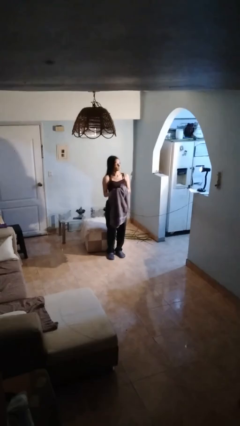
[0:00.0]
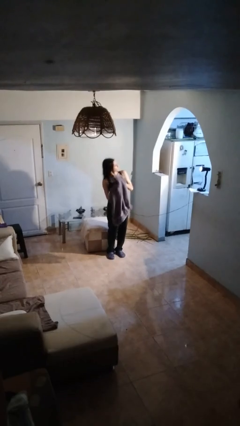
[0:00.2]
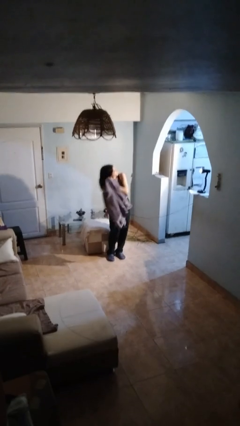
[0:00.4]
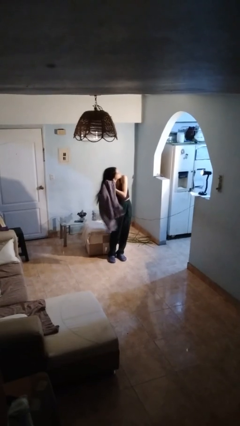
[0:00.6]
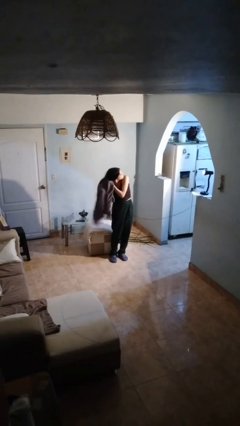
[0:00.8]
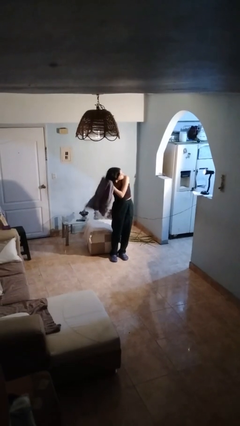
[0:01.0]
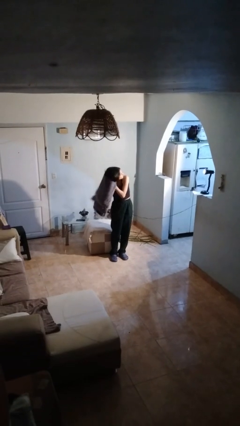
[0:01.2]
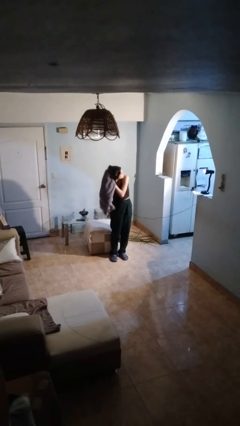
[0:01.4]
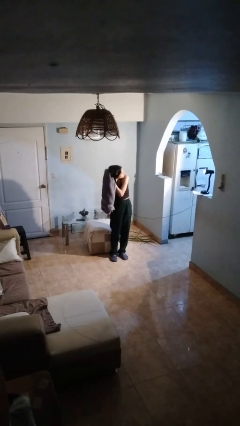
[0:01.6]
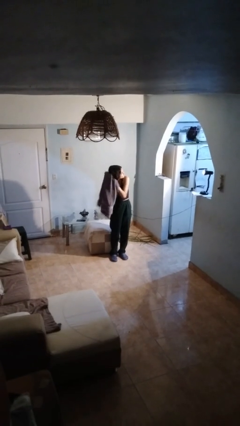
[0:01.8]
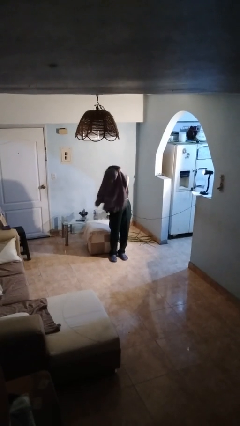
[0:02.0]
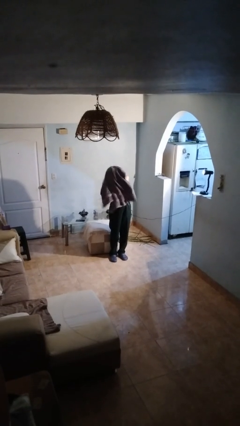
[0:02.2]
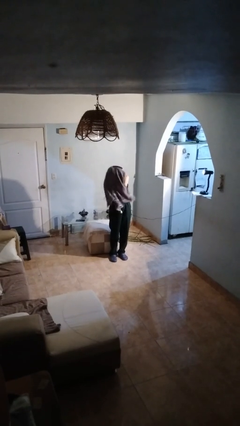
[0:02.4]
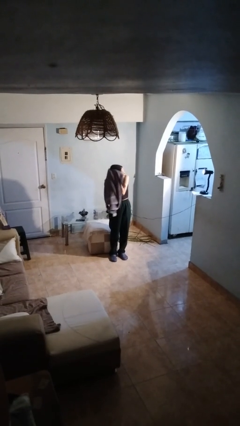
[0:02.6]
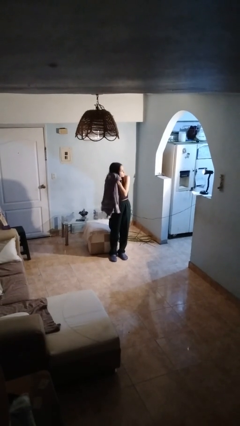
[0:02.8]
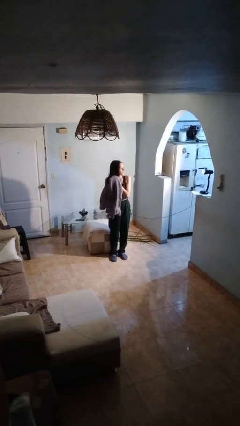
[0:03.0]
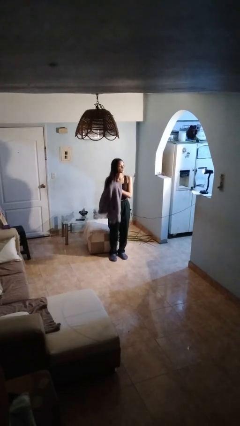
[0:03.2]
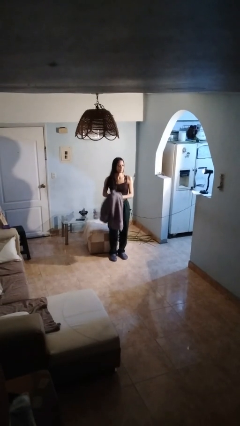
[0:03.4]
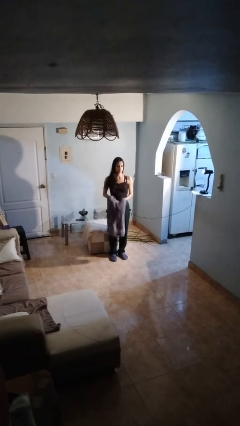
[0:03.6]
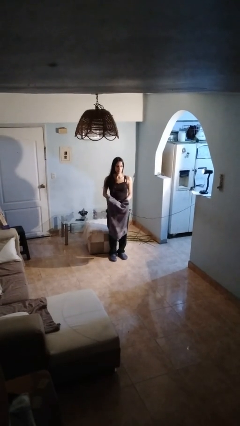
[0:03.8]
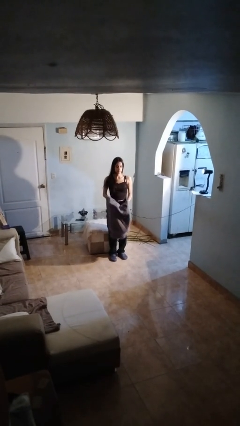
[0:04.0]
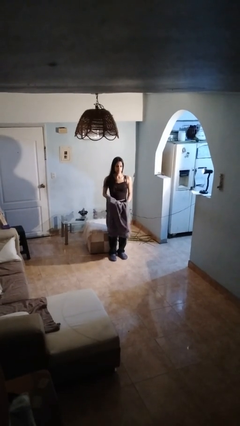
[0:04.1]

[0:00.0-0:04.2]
person dries hair with towel

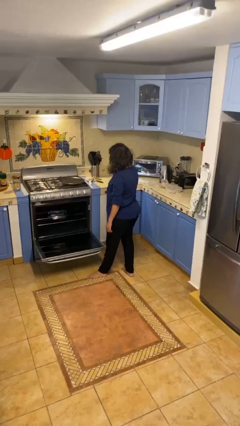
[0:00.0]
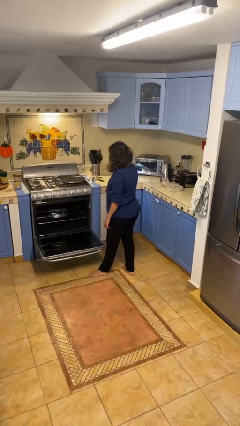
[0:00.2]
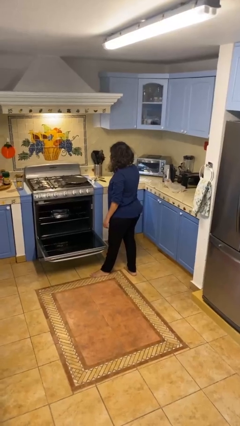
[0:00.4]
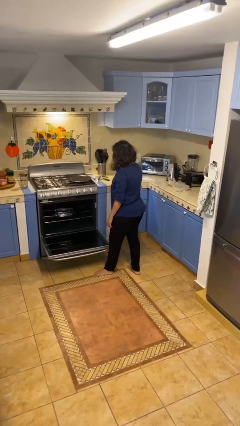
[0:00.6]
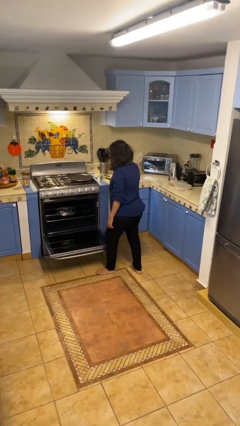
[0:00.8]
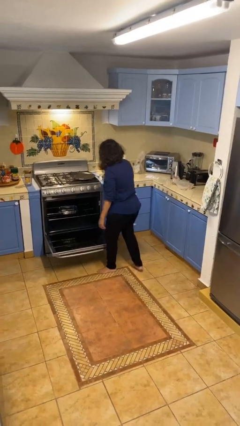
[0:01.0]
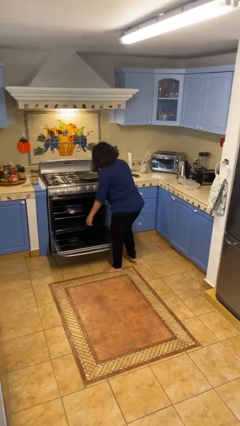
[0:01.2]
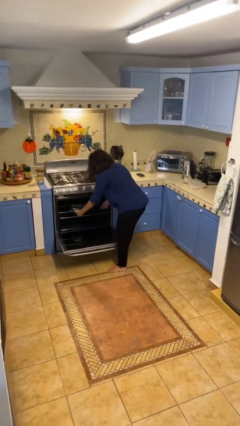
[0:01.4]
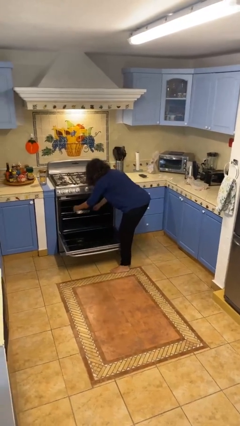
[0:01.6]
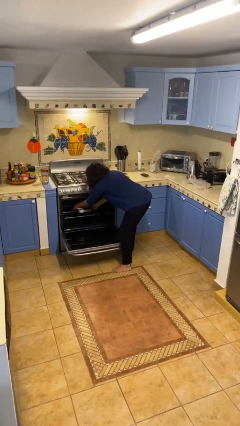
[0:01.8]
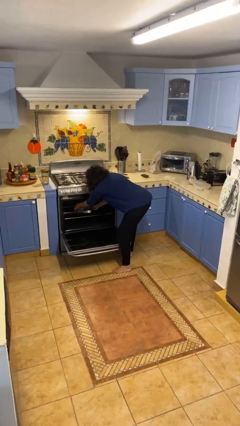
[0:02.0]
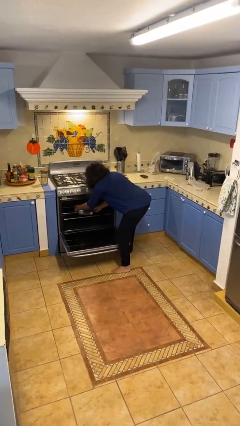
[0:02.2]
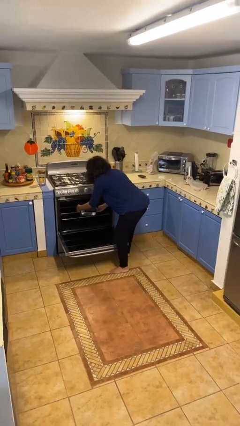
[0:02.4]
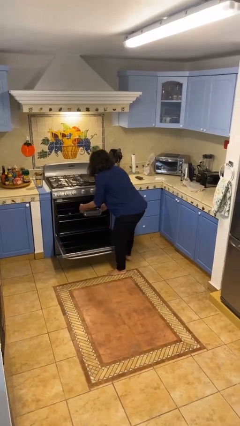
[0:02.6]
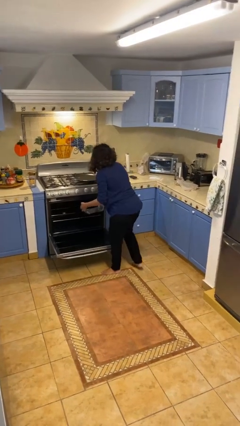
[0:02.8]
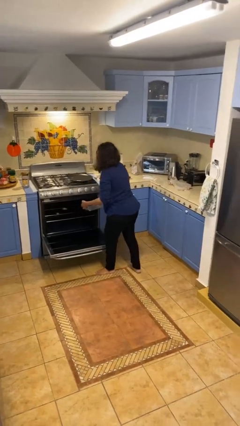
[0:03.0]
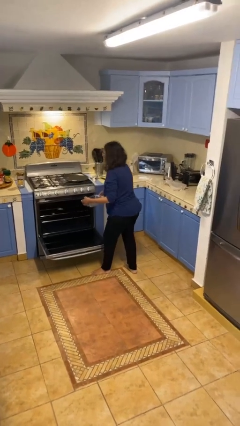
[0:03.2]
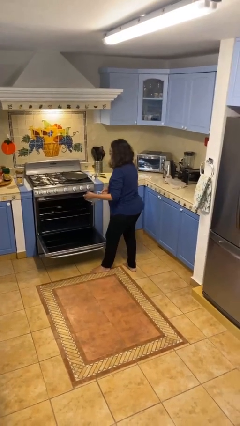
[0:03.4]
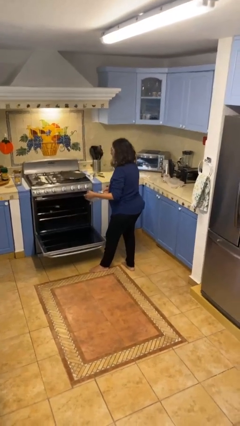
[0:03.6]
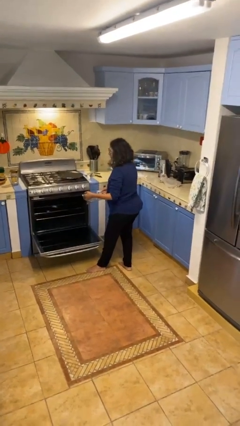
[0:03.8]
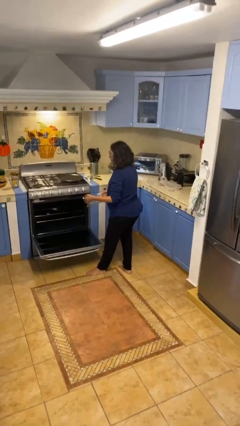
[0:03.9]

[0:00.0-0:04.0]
person takes object from oven

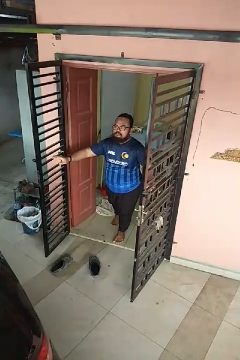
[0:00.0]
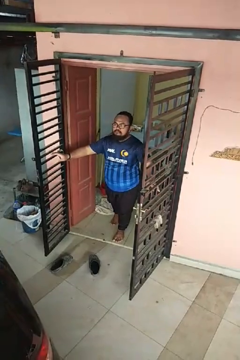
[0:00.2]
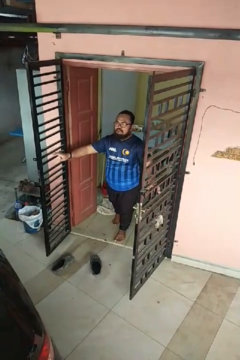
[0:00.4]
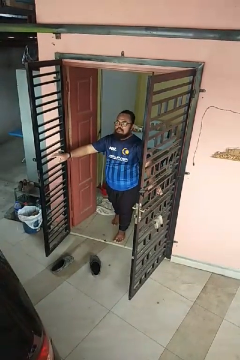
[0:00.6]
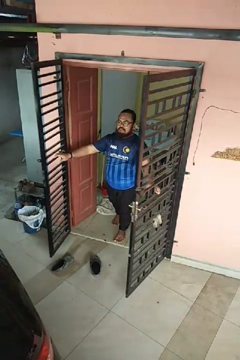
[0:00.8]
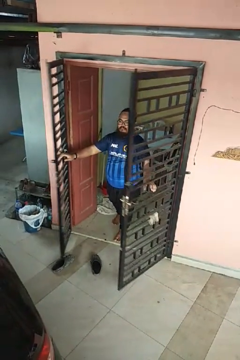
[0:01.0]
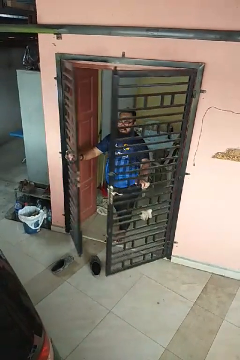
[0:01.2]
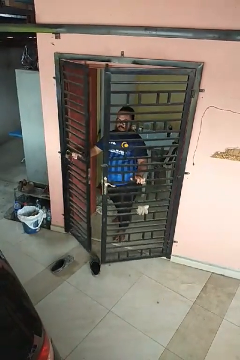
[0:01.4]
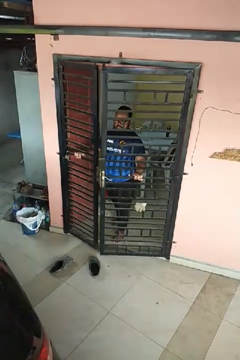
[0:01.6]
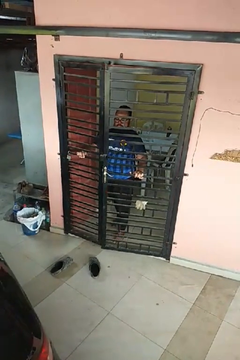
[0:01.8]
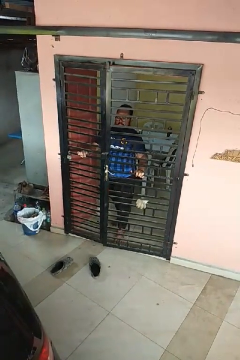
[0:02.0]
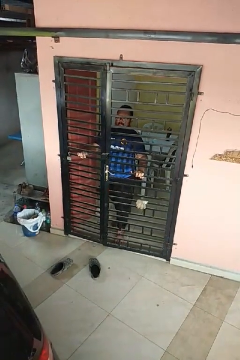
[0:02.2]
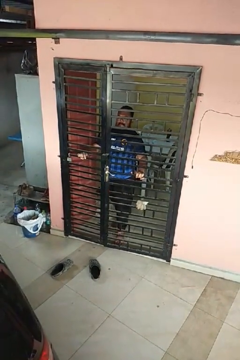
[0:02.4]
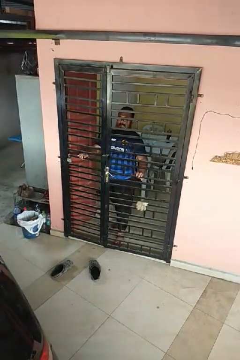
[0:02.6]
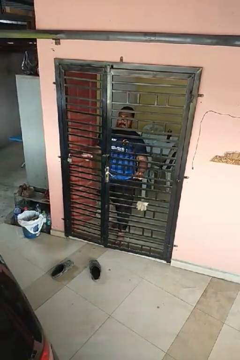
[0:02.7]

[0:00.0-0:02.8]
person closes gate

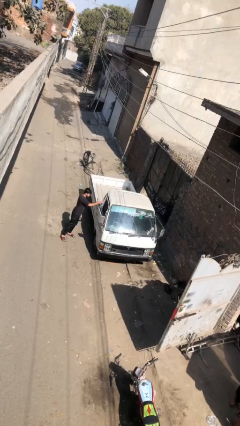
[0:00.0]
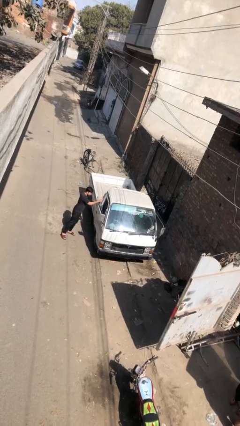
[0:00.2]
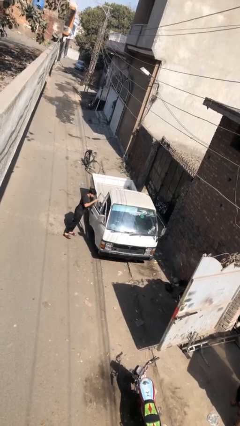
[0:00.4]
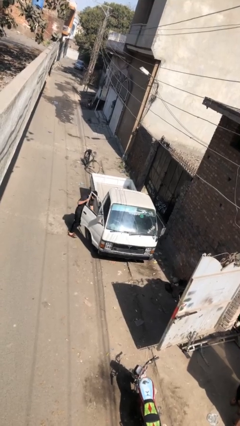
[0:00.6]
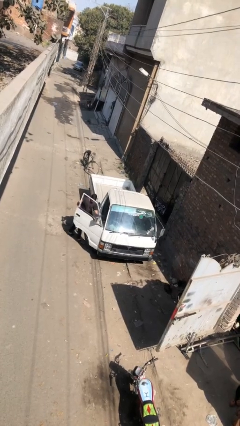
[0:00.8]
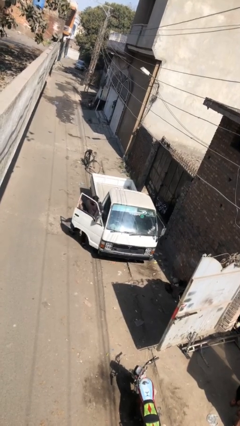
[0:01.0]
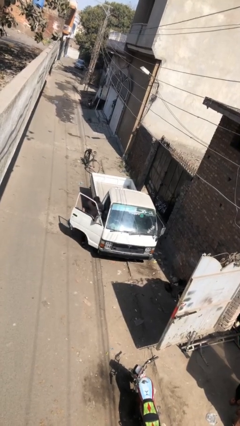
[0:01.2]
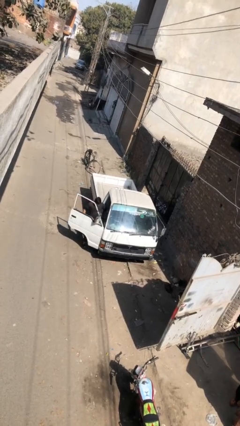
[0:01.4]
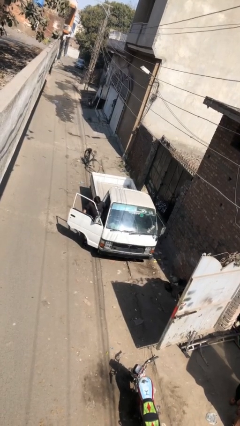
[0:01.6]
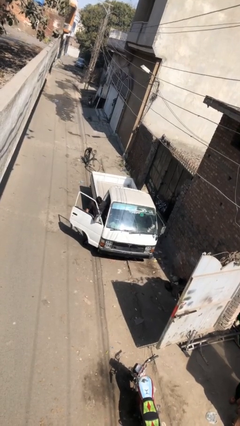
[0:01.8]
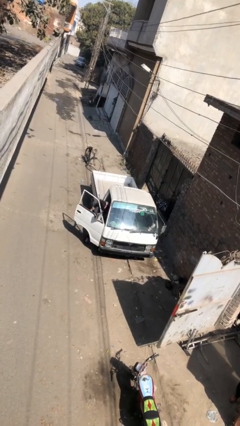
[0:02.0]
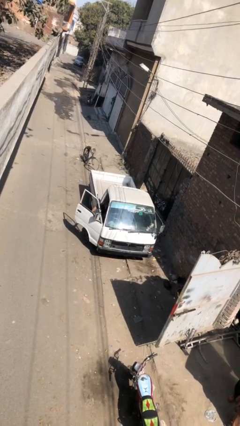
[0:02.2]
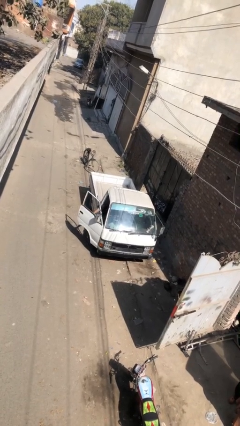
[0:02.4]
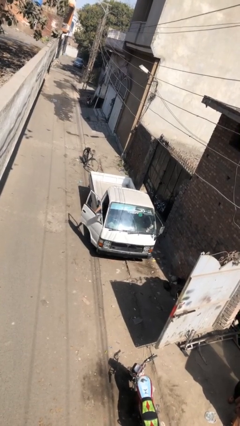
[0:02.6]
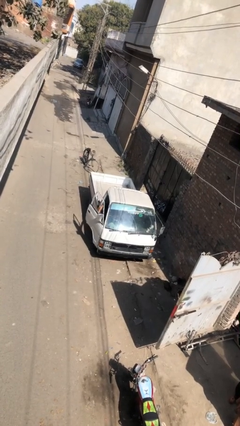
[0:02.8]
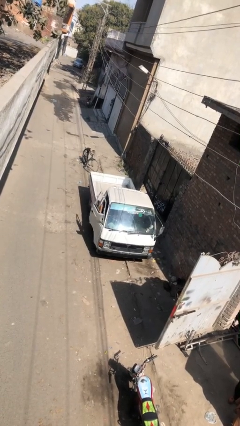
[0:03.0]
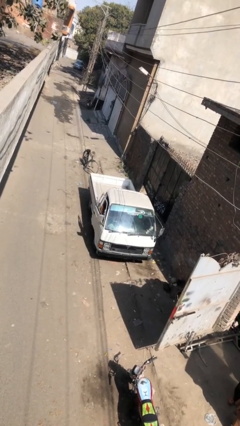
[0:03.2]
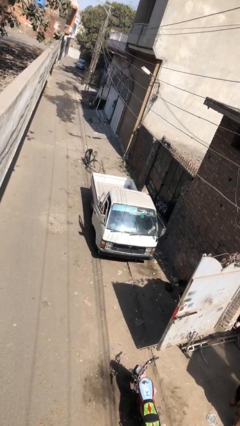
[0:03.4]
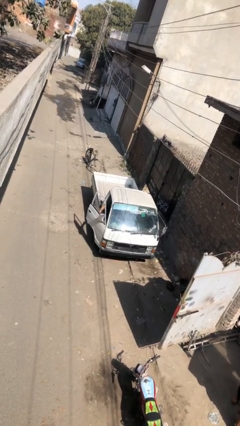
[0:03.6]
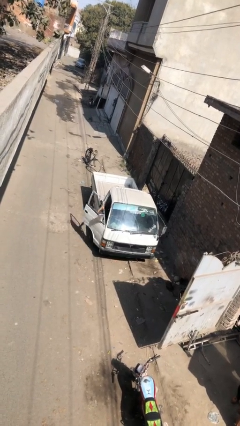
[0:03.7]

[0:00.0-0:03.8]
car picks up person

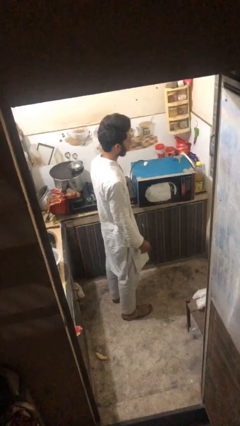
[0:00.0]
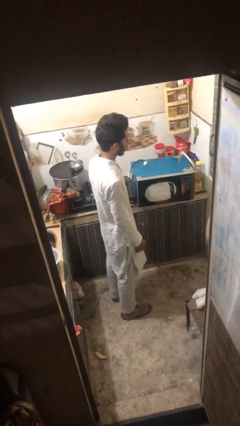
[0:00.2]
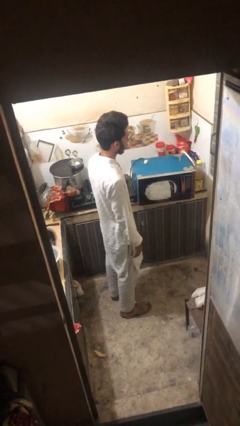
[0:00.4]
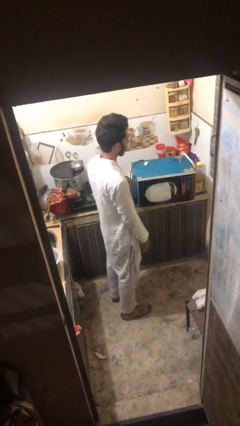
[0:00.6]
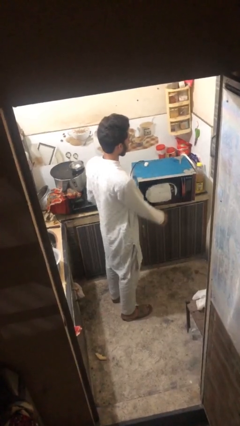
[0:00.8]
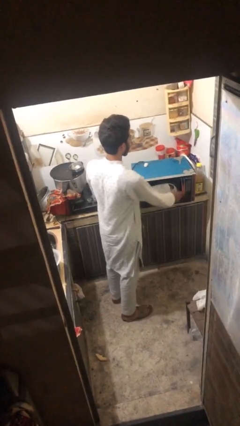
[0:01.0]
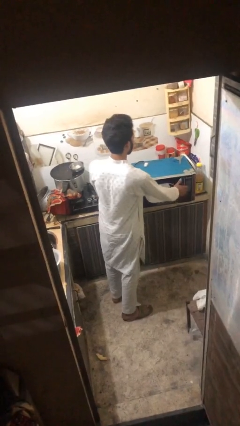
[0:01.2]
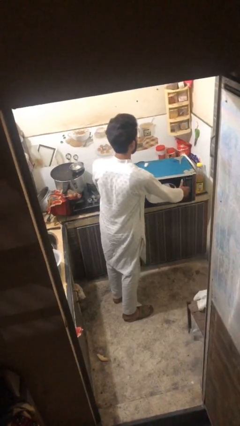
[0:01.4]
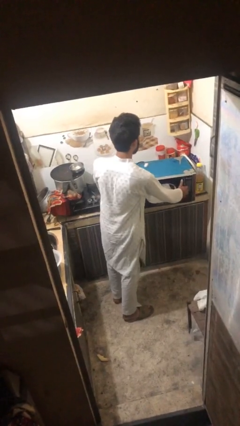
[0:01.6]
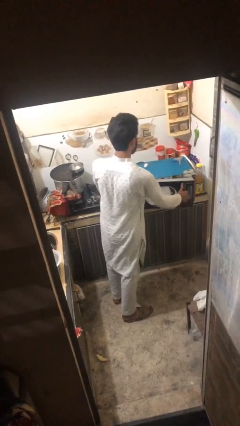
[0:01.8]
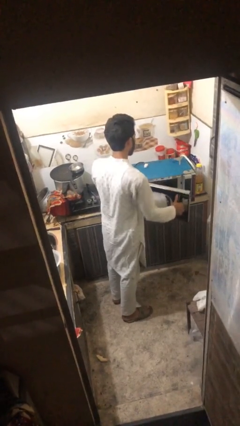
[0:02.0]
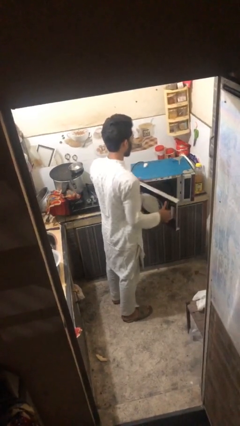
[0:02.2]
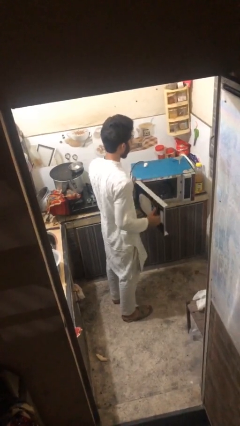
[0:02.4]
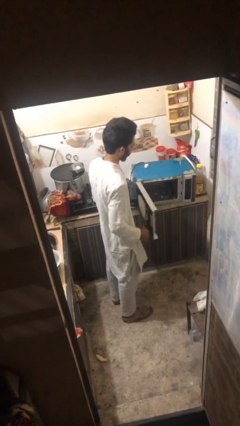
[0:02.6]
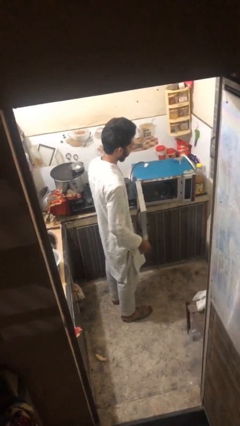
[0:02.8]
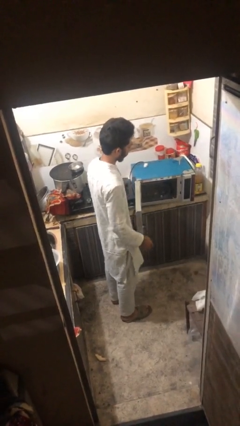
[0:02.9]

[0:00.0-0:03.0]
person opens oven door

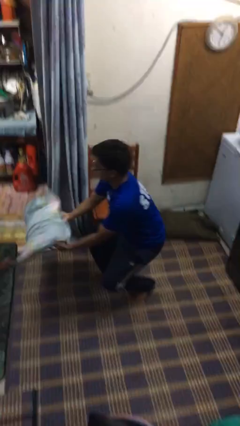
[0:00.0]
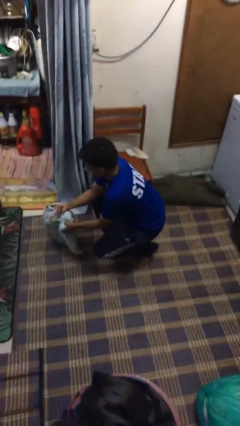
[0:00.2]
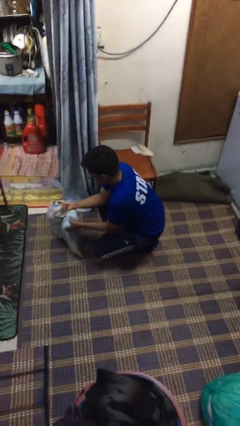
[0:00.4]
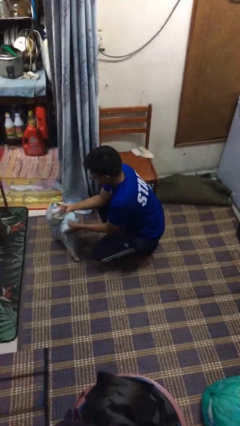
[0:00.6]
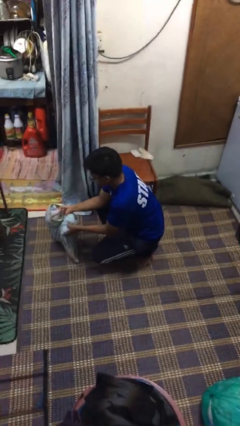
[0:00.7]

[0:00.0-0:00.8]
person catches dropped object
